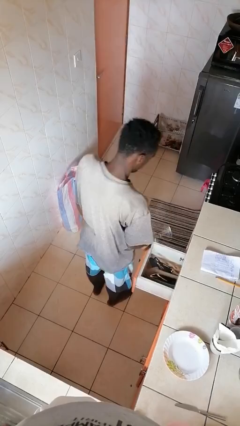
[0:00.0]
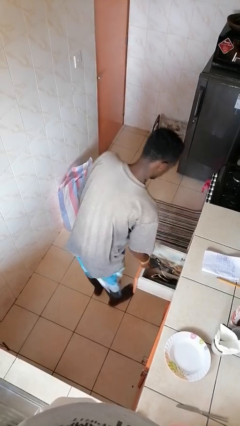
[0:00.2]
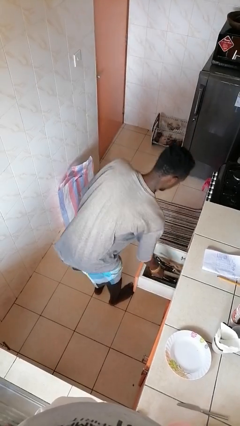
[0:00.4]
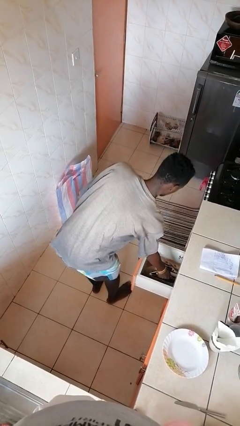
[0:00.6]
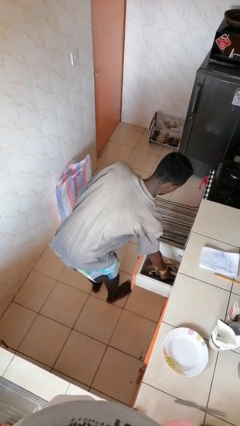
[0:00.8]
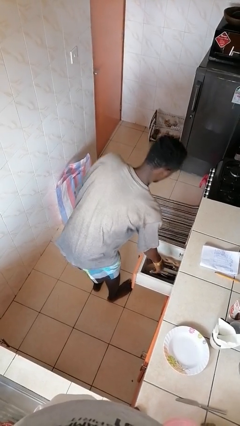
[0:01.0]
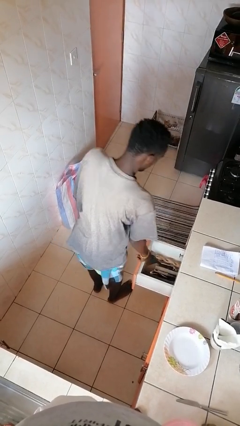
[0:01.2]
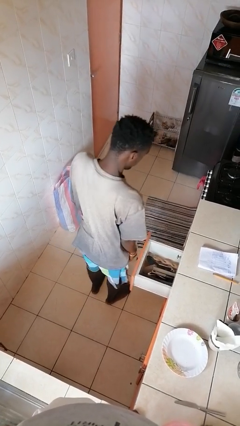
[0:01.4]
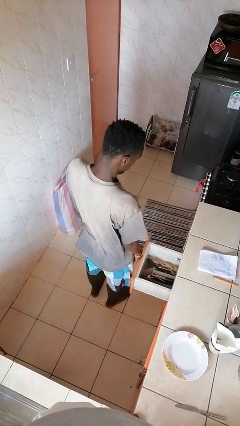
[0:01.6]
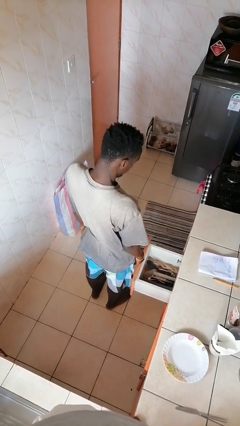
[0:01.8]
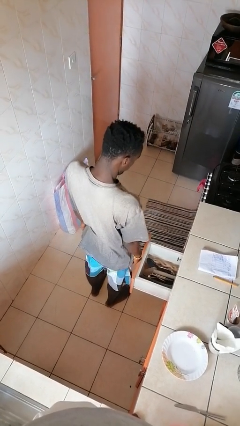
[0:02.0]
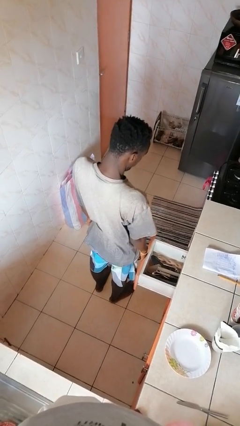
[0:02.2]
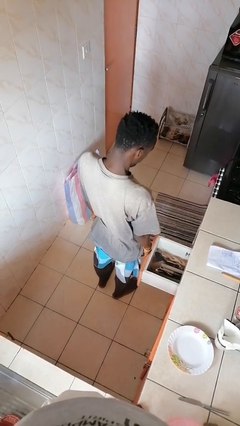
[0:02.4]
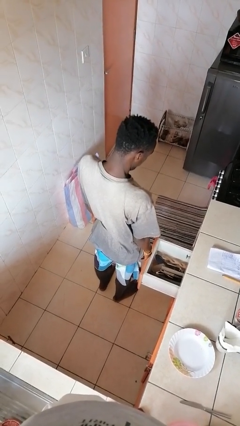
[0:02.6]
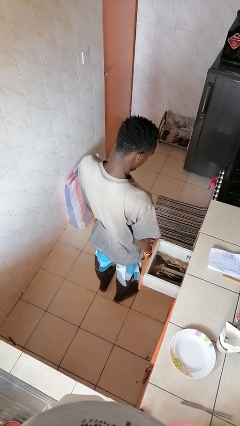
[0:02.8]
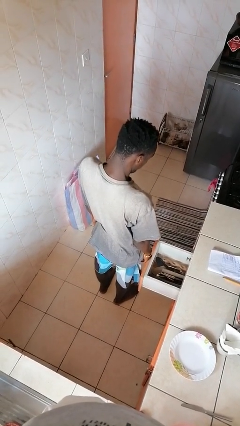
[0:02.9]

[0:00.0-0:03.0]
person puts object into kitchen drawer

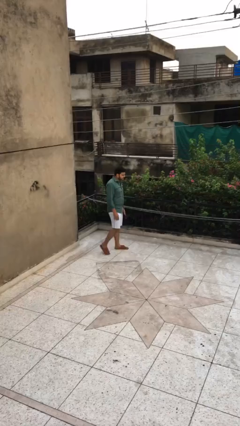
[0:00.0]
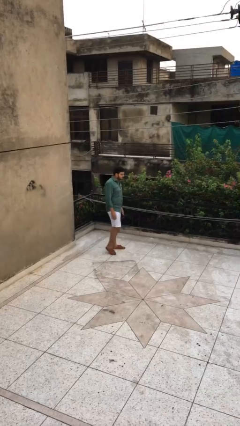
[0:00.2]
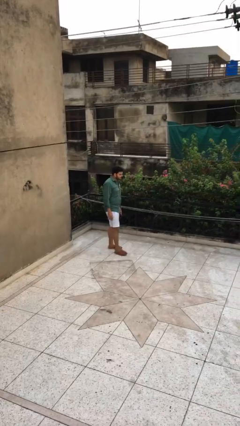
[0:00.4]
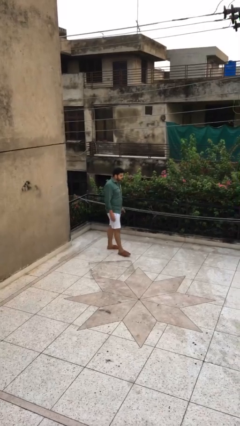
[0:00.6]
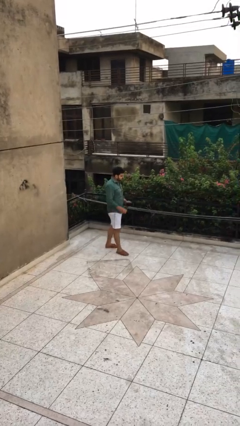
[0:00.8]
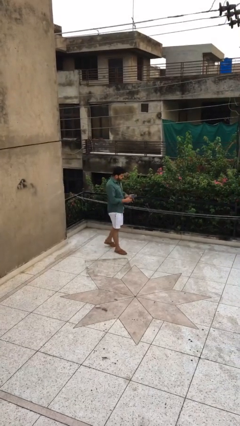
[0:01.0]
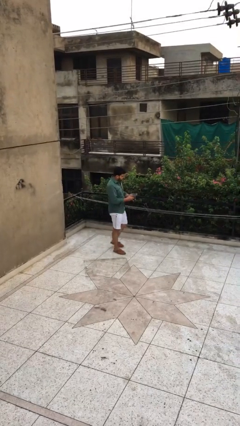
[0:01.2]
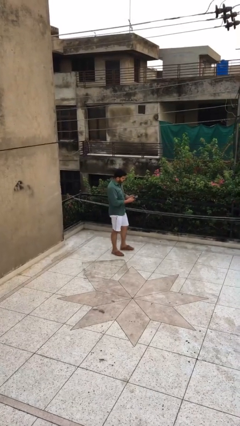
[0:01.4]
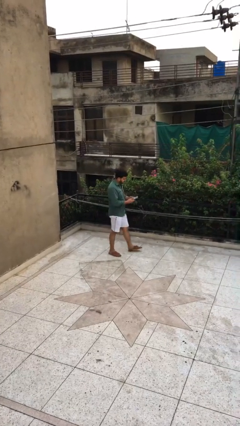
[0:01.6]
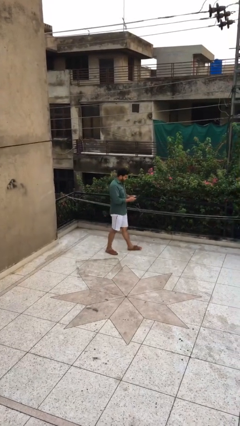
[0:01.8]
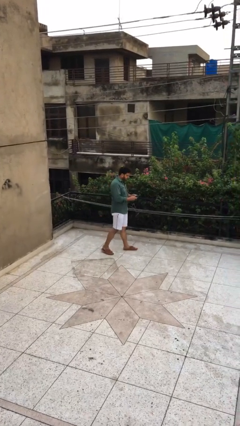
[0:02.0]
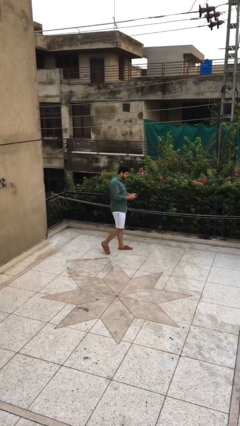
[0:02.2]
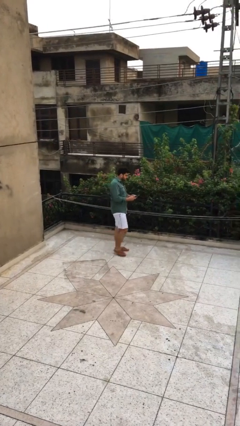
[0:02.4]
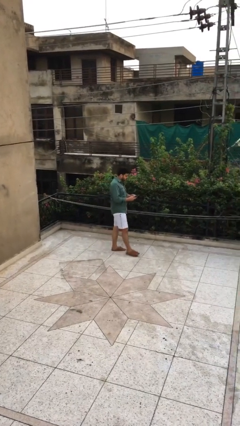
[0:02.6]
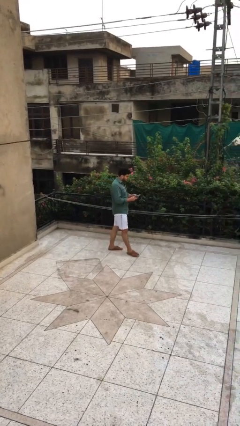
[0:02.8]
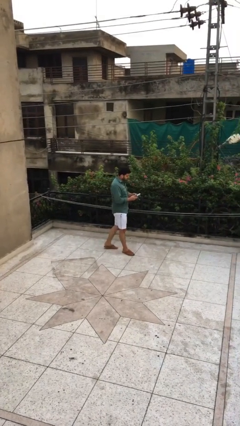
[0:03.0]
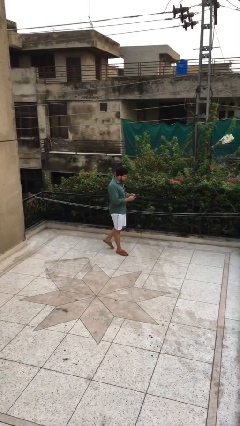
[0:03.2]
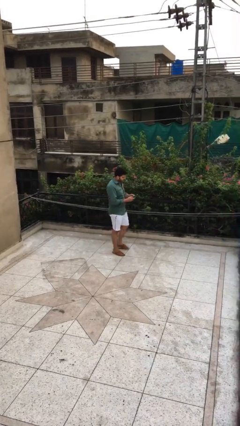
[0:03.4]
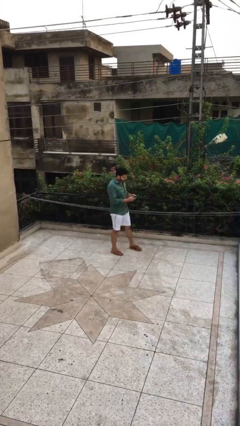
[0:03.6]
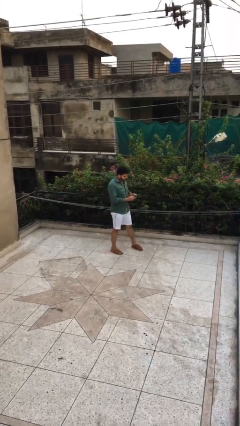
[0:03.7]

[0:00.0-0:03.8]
person texts on phone

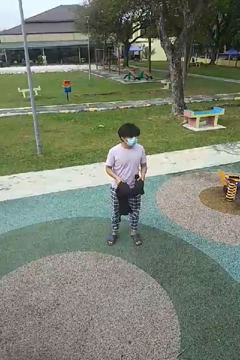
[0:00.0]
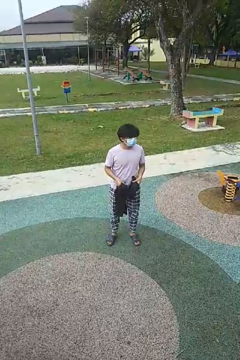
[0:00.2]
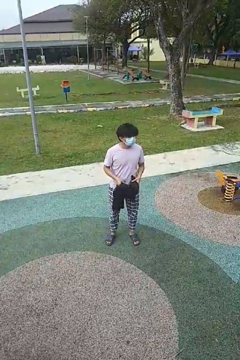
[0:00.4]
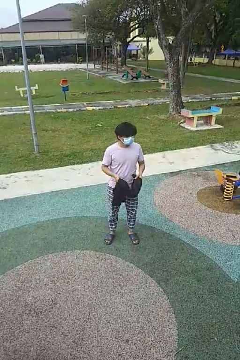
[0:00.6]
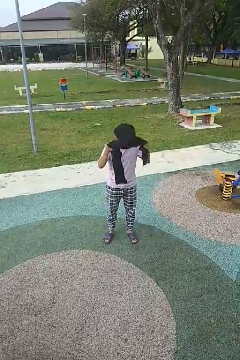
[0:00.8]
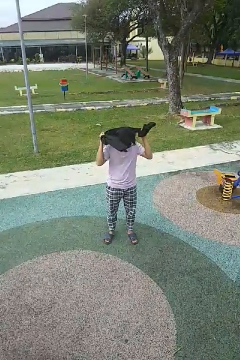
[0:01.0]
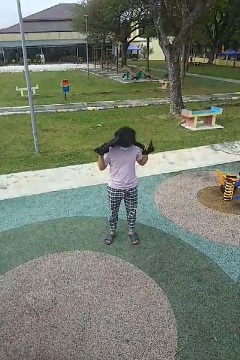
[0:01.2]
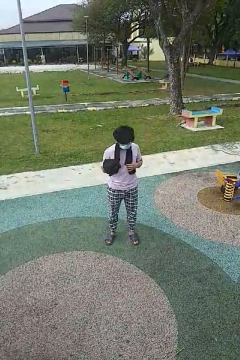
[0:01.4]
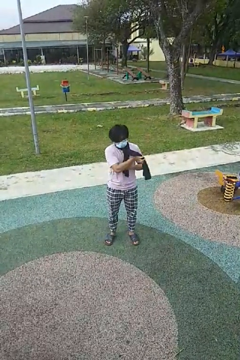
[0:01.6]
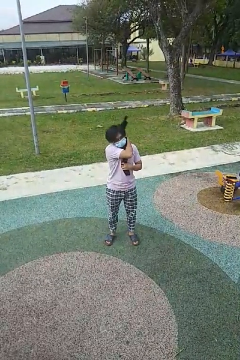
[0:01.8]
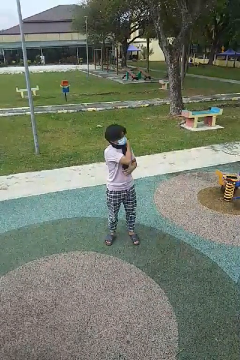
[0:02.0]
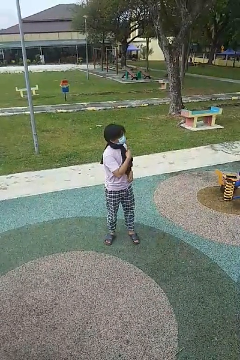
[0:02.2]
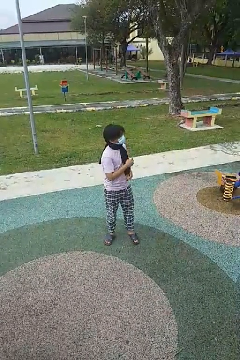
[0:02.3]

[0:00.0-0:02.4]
person puts on scarf

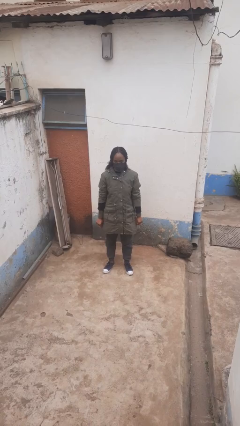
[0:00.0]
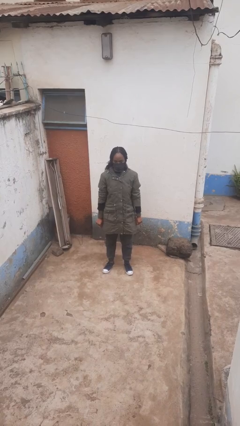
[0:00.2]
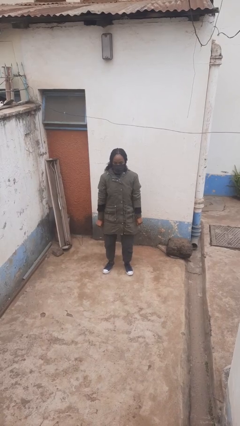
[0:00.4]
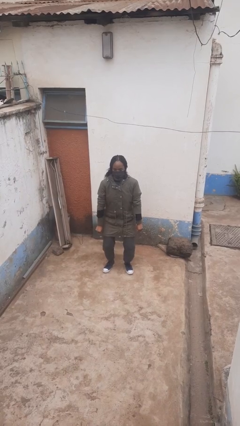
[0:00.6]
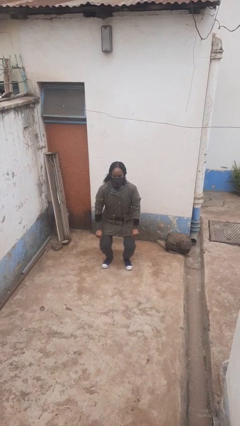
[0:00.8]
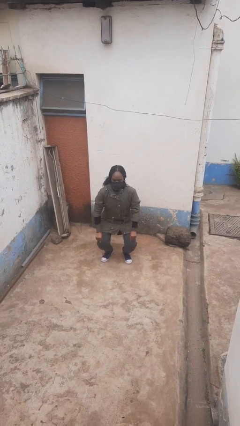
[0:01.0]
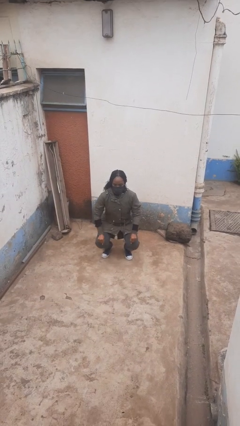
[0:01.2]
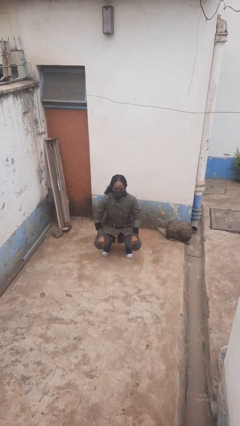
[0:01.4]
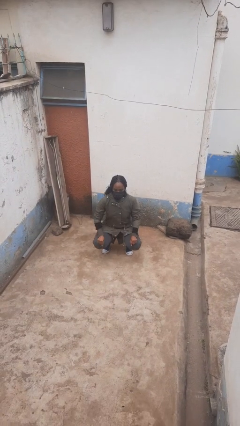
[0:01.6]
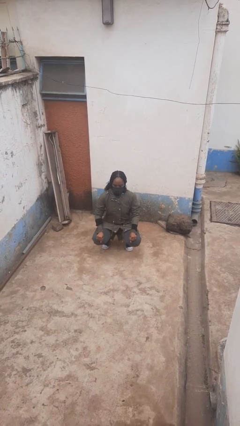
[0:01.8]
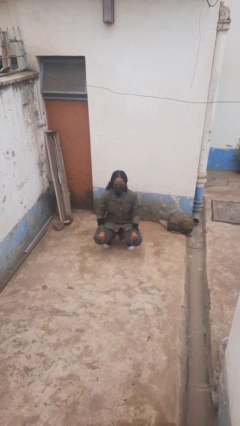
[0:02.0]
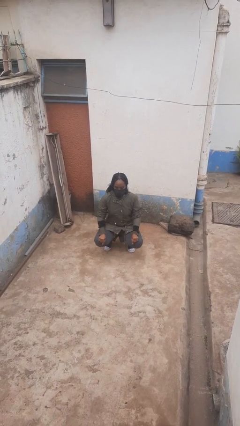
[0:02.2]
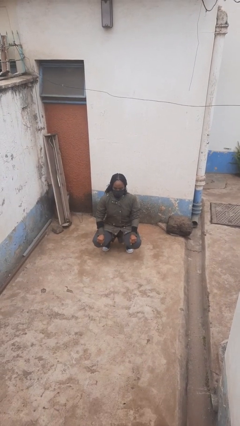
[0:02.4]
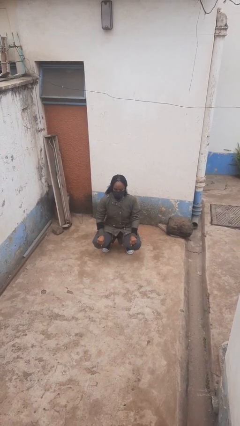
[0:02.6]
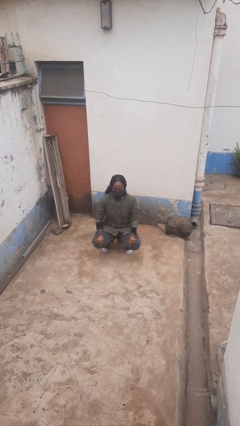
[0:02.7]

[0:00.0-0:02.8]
person squats

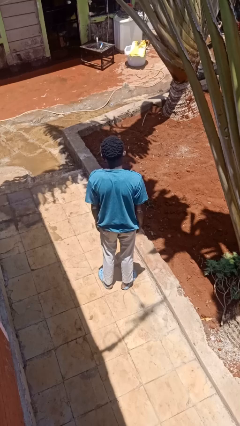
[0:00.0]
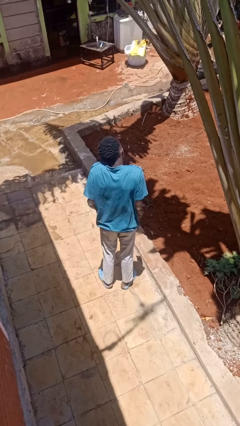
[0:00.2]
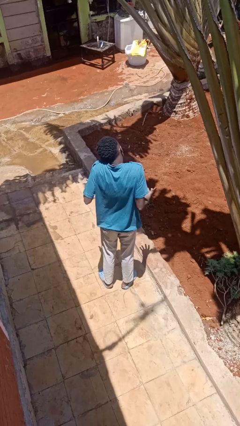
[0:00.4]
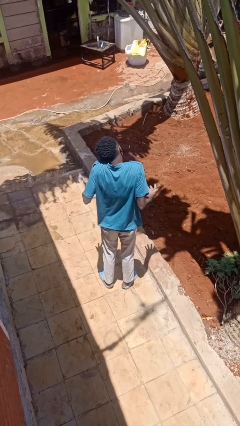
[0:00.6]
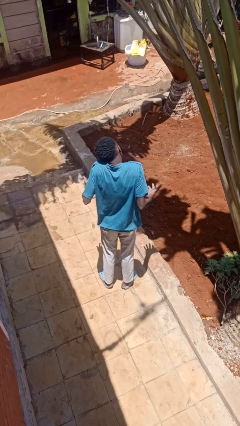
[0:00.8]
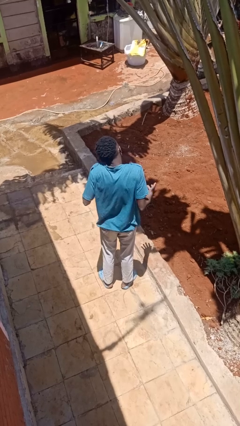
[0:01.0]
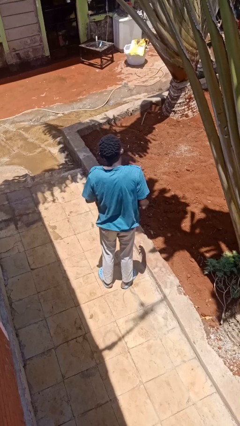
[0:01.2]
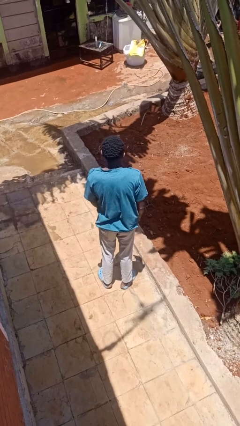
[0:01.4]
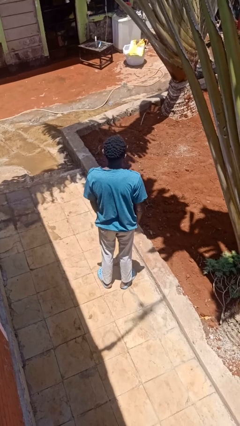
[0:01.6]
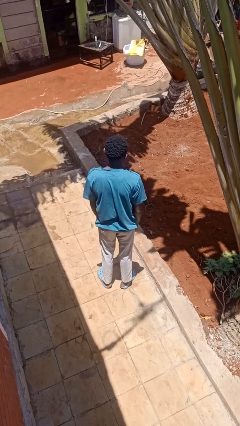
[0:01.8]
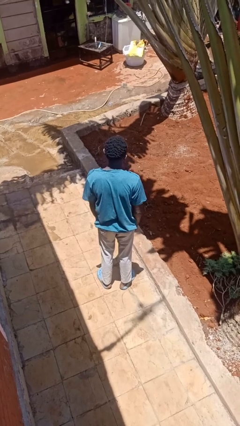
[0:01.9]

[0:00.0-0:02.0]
person shrugs

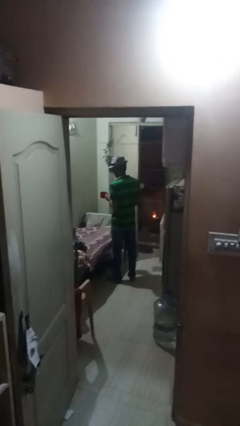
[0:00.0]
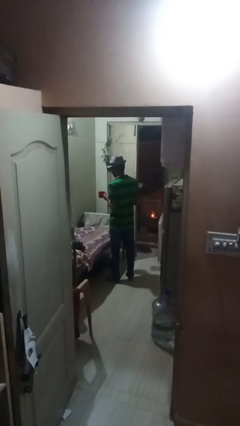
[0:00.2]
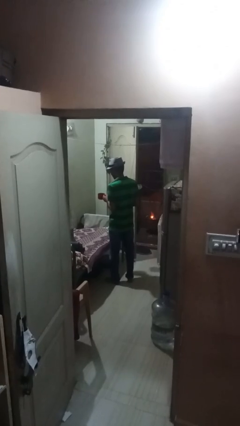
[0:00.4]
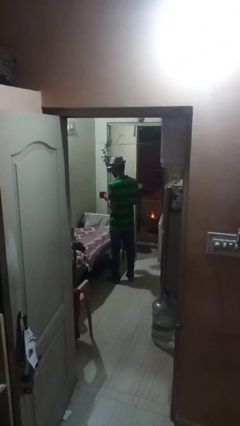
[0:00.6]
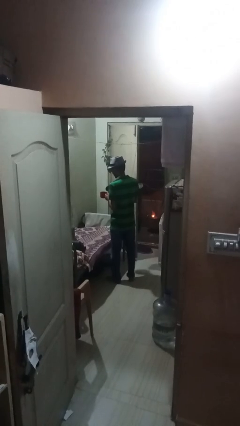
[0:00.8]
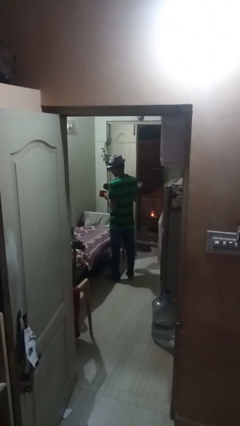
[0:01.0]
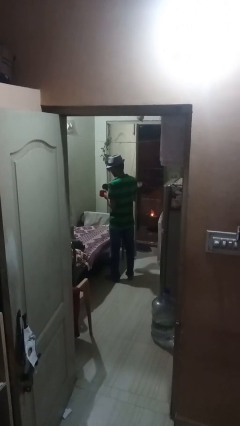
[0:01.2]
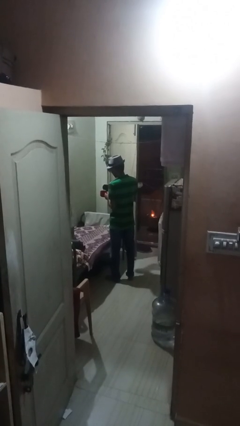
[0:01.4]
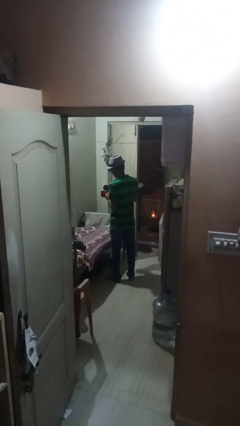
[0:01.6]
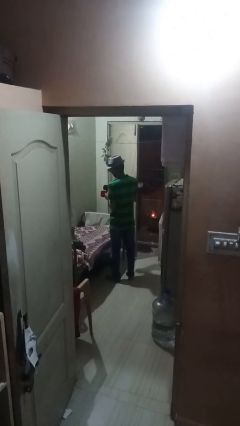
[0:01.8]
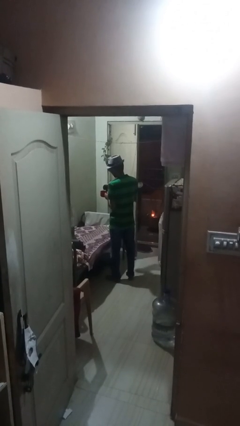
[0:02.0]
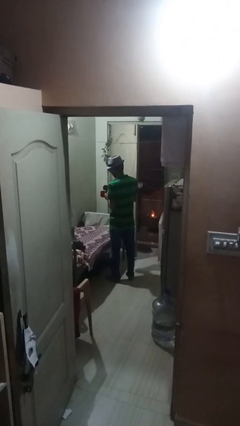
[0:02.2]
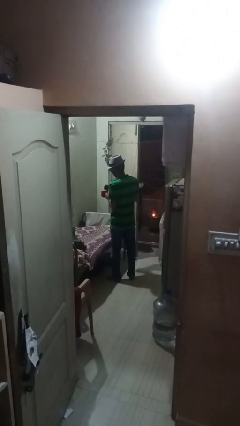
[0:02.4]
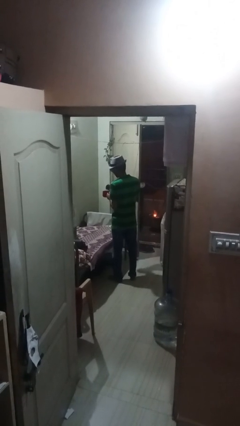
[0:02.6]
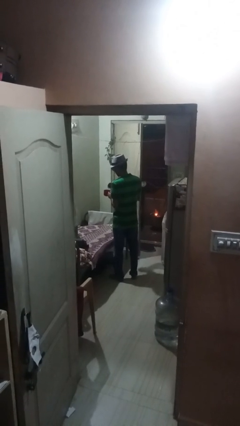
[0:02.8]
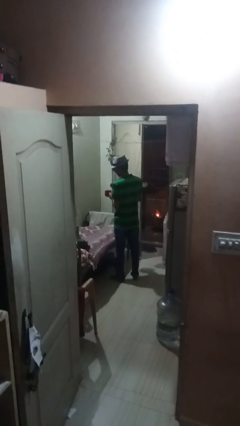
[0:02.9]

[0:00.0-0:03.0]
person pours coffee into mug

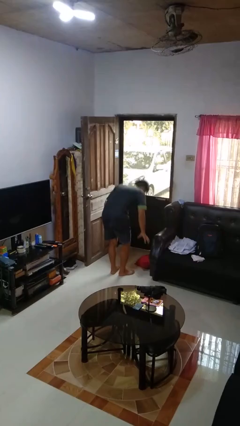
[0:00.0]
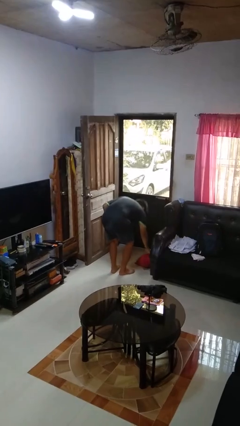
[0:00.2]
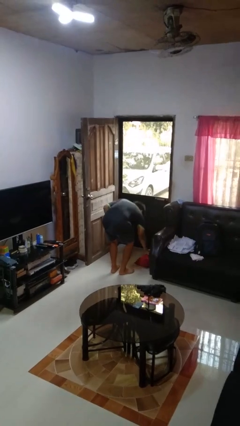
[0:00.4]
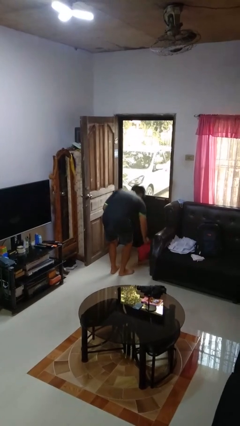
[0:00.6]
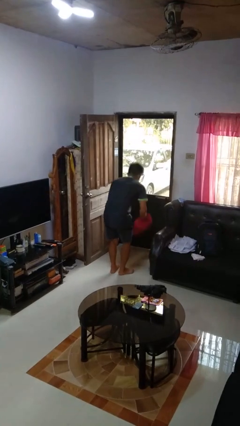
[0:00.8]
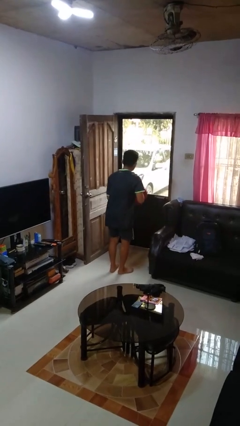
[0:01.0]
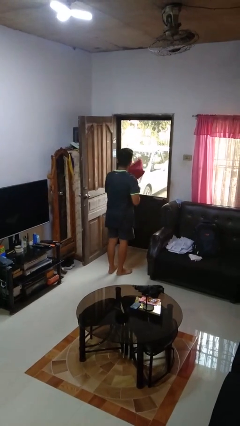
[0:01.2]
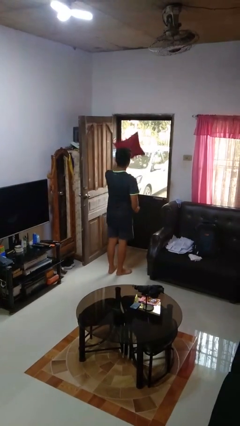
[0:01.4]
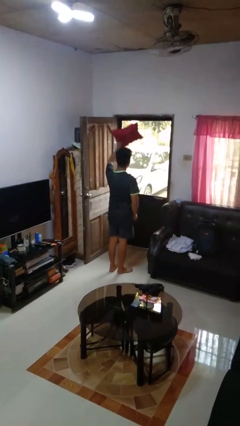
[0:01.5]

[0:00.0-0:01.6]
person picks up object from floor
